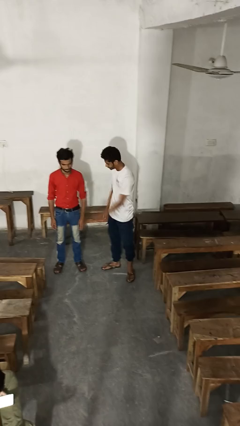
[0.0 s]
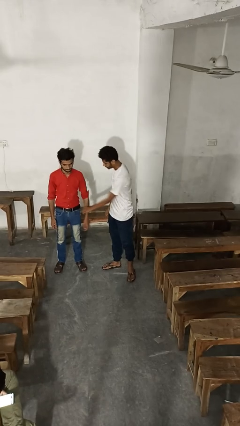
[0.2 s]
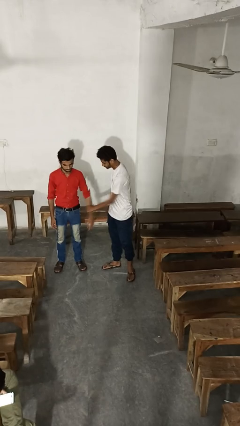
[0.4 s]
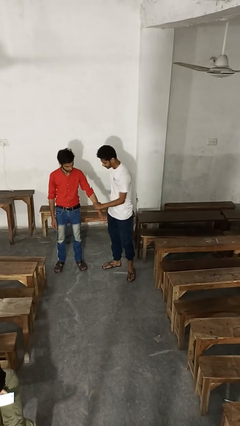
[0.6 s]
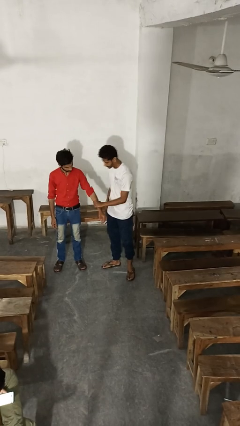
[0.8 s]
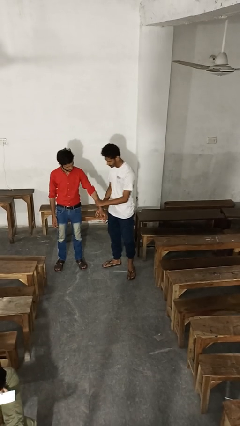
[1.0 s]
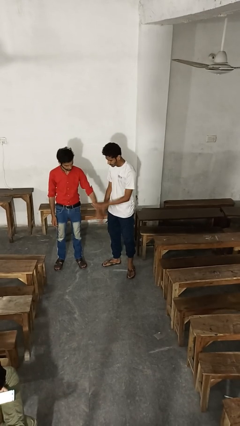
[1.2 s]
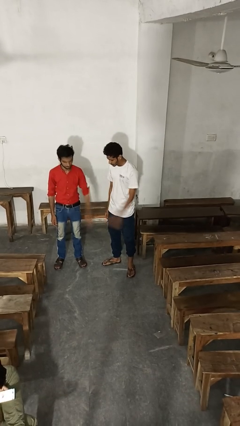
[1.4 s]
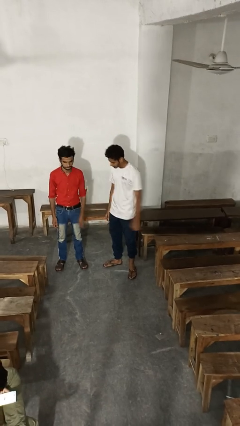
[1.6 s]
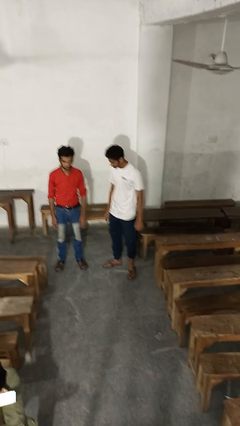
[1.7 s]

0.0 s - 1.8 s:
person grabs person by forearm

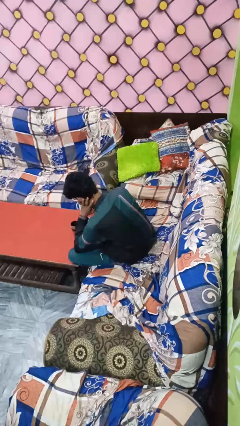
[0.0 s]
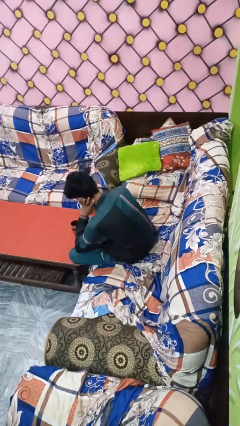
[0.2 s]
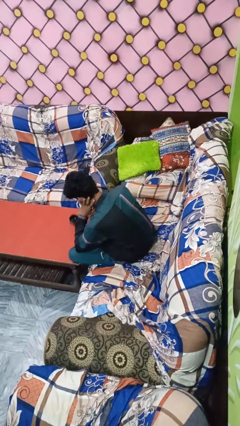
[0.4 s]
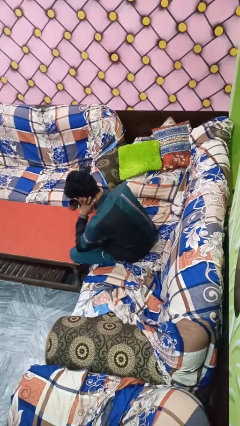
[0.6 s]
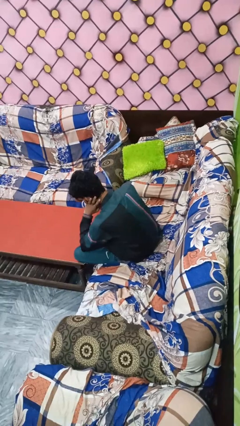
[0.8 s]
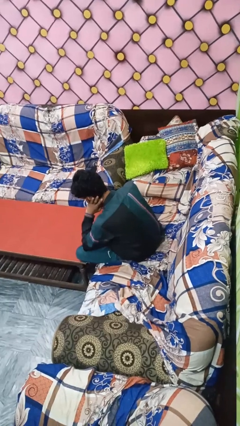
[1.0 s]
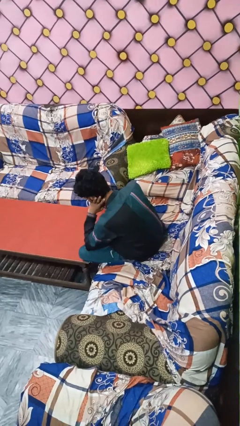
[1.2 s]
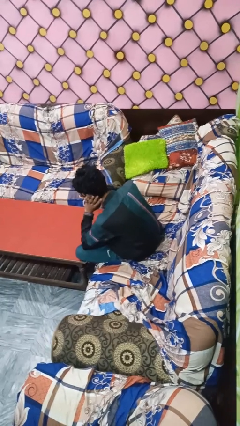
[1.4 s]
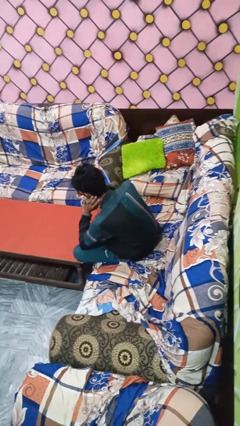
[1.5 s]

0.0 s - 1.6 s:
person pours coffee into mug

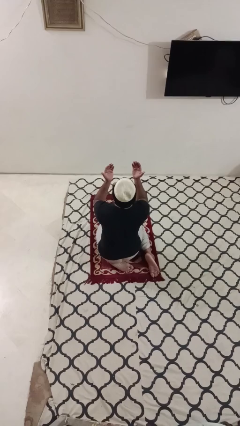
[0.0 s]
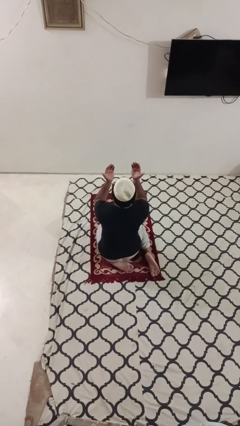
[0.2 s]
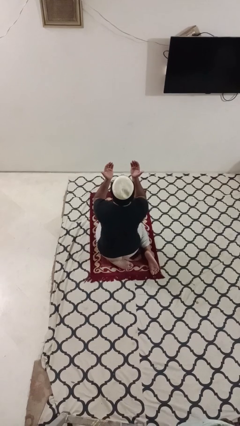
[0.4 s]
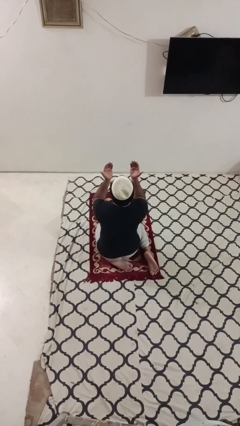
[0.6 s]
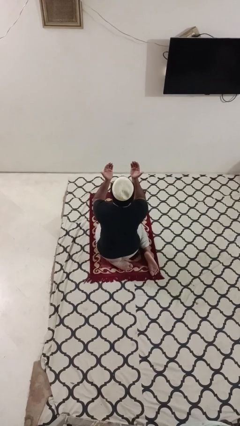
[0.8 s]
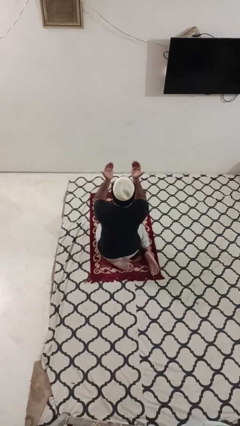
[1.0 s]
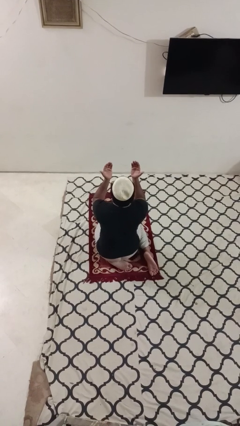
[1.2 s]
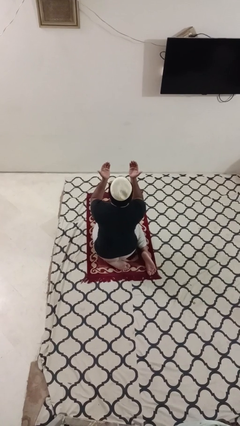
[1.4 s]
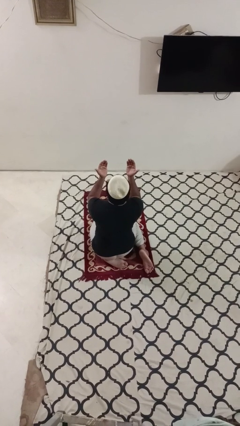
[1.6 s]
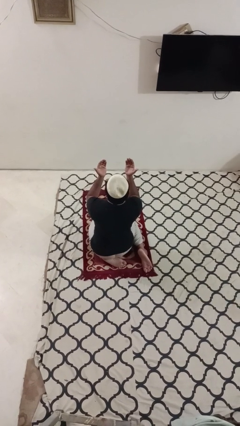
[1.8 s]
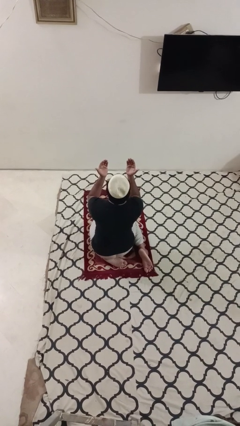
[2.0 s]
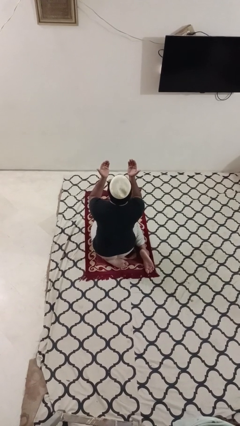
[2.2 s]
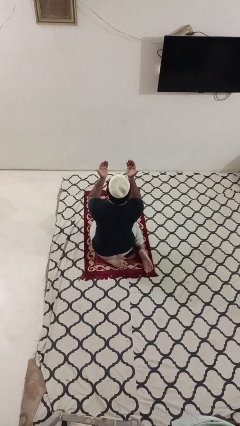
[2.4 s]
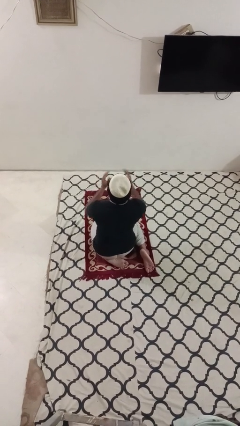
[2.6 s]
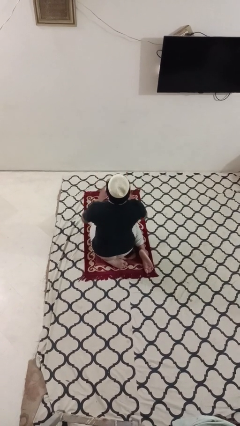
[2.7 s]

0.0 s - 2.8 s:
person prays

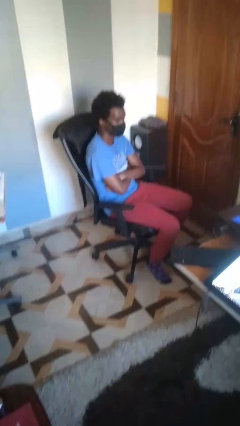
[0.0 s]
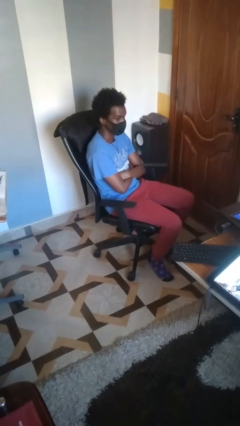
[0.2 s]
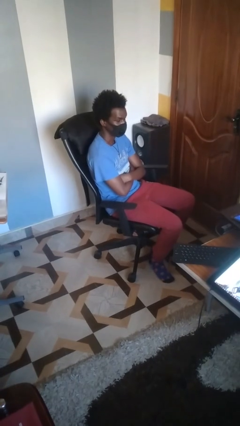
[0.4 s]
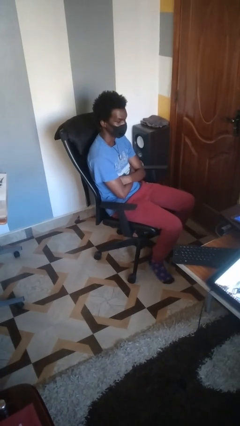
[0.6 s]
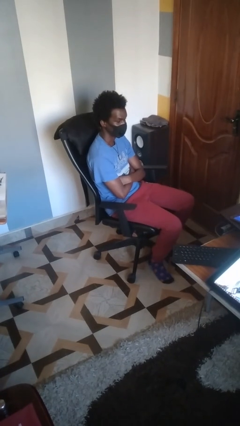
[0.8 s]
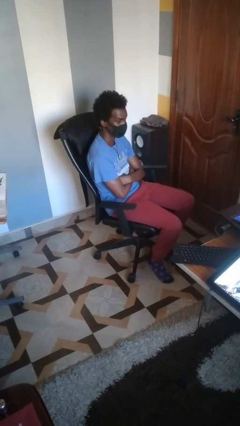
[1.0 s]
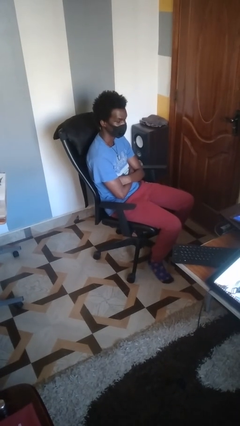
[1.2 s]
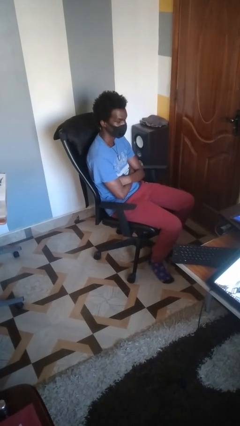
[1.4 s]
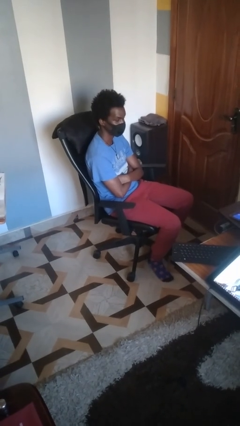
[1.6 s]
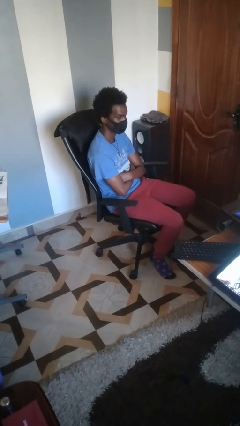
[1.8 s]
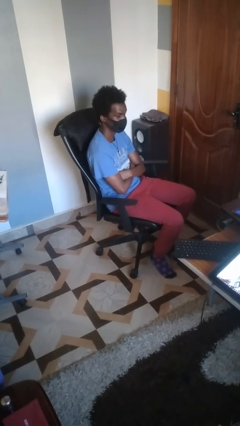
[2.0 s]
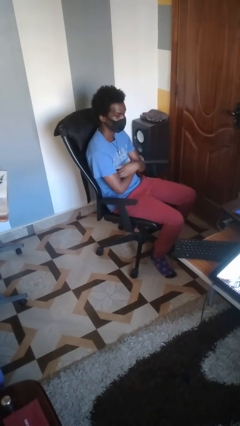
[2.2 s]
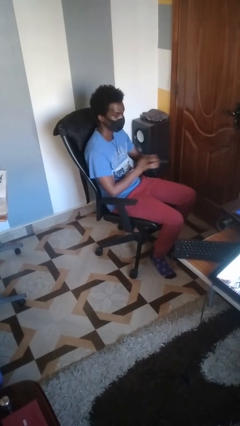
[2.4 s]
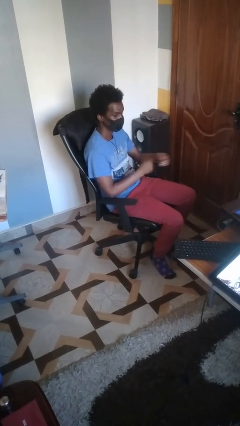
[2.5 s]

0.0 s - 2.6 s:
person crosses arms

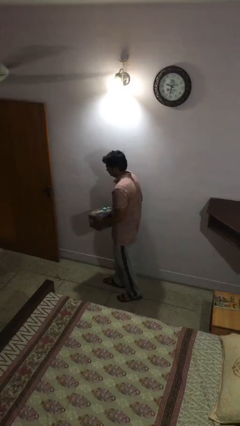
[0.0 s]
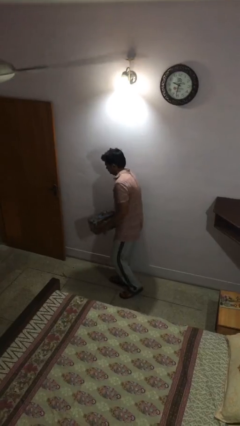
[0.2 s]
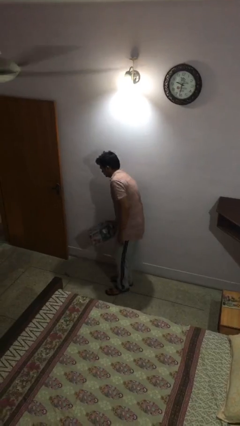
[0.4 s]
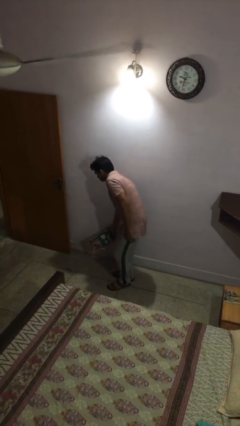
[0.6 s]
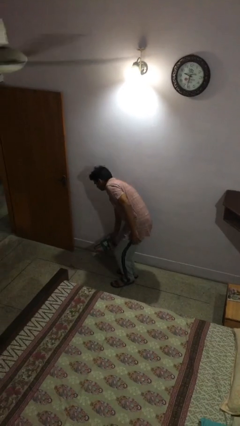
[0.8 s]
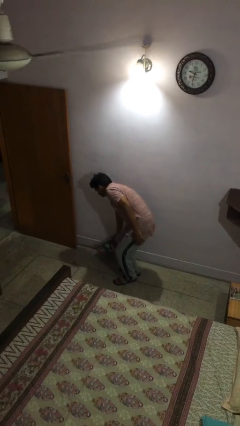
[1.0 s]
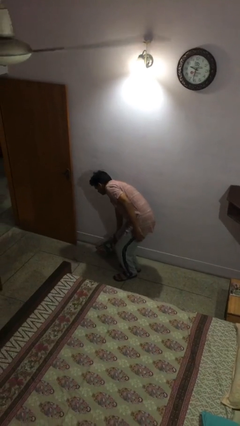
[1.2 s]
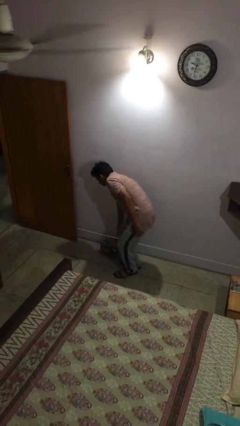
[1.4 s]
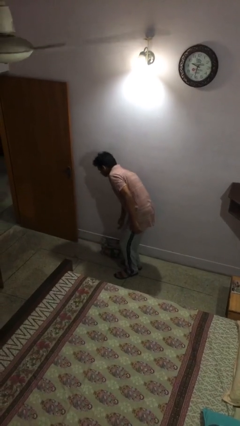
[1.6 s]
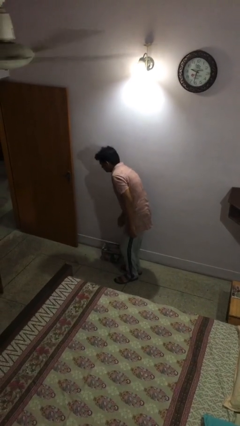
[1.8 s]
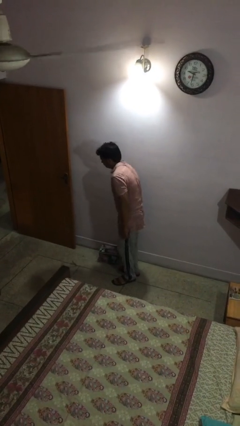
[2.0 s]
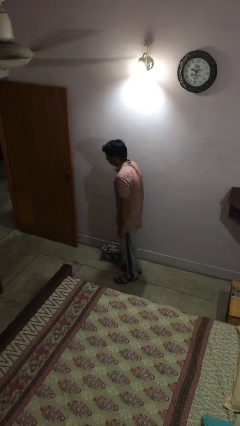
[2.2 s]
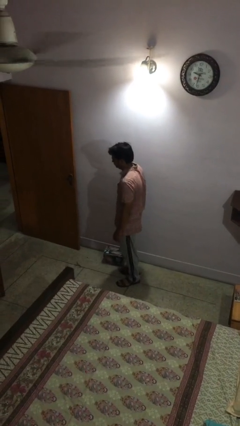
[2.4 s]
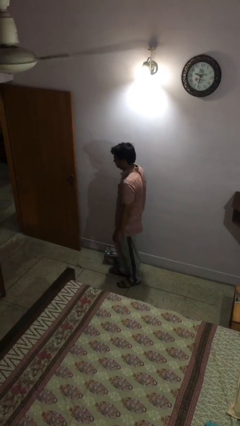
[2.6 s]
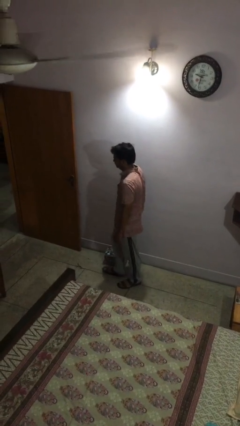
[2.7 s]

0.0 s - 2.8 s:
person puts down object on floor

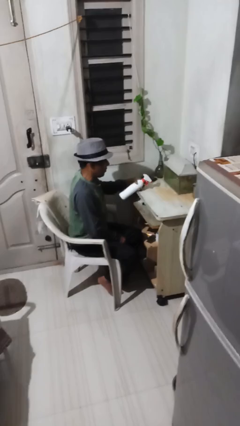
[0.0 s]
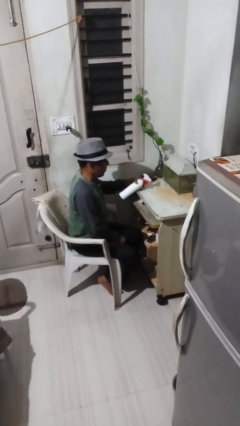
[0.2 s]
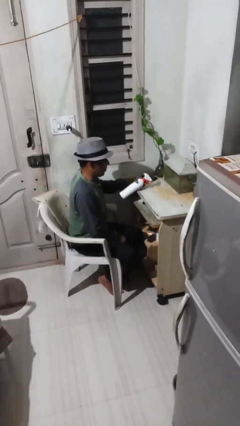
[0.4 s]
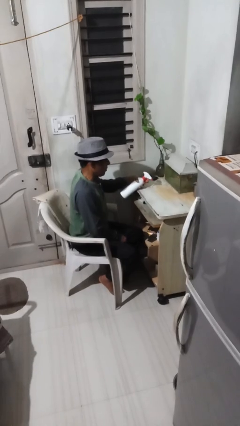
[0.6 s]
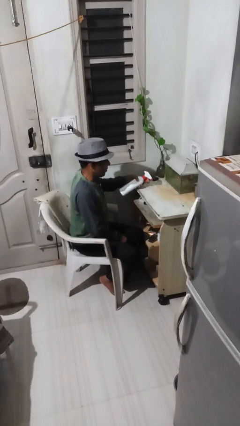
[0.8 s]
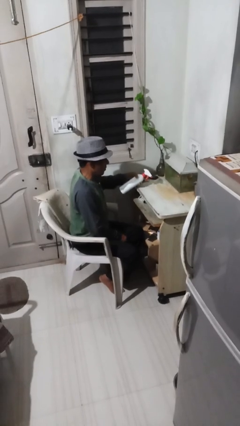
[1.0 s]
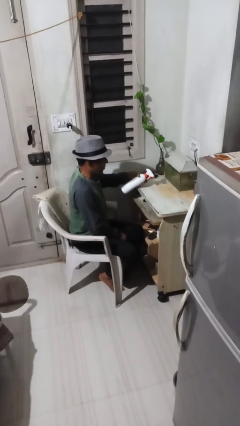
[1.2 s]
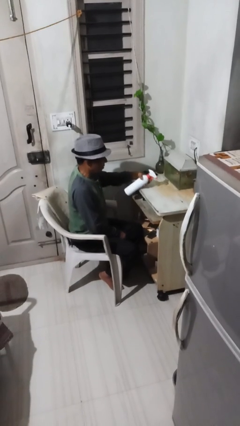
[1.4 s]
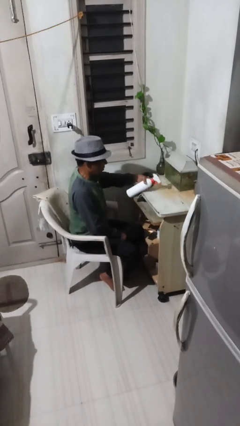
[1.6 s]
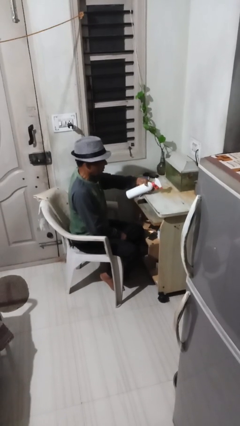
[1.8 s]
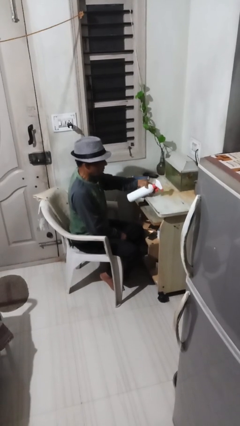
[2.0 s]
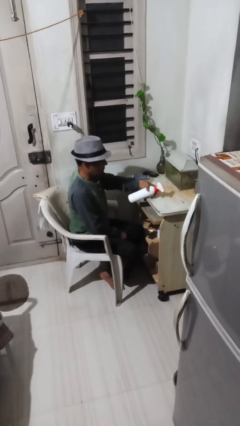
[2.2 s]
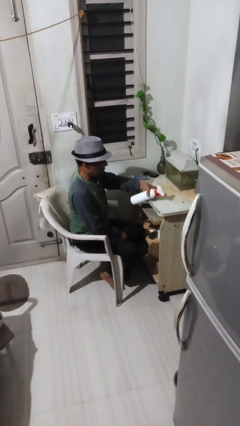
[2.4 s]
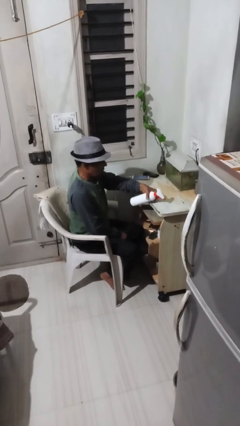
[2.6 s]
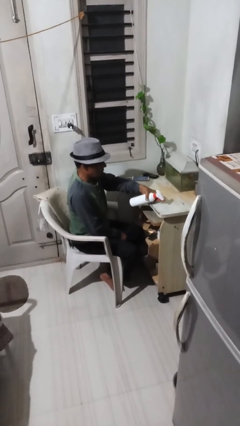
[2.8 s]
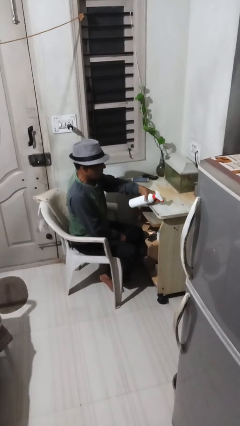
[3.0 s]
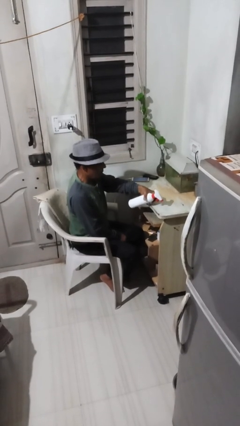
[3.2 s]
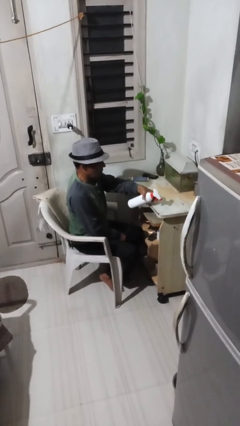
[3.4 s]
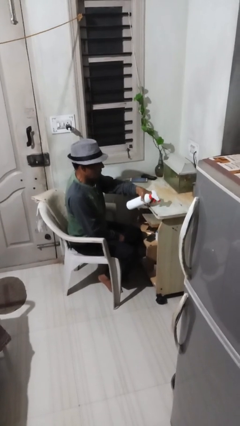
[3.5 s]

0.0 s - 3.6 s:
person sprays from bottle

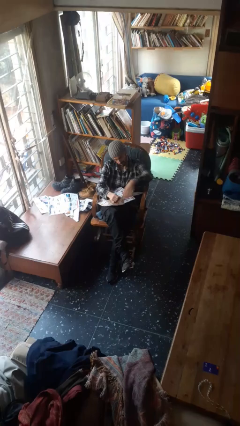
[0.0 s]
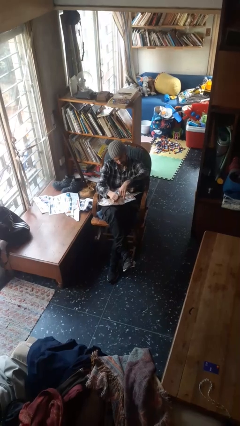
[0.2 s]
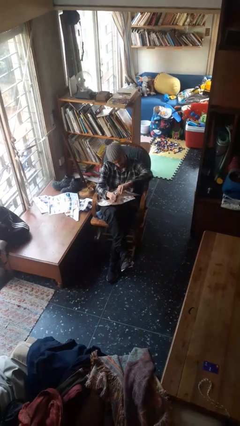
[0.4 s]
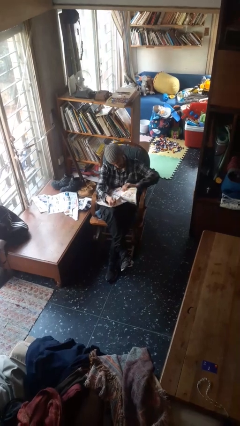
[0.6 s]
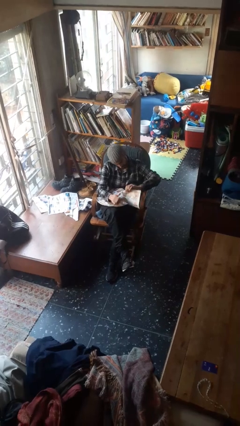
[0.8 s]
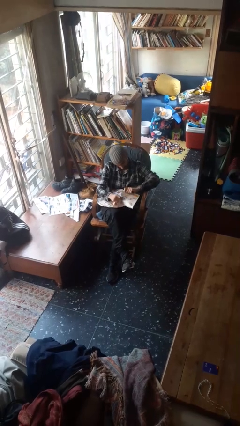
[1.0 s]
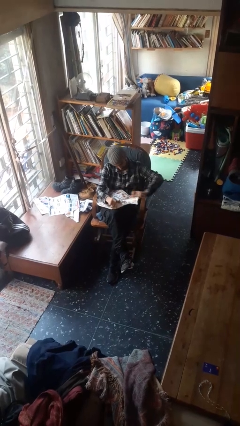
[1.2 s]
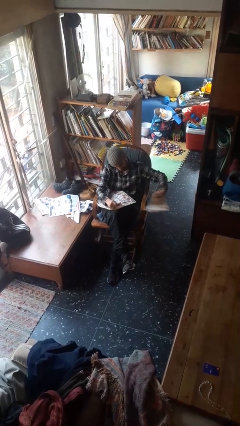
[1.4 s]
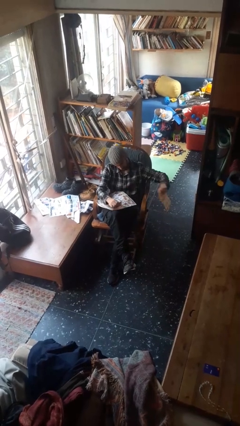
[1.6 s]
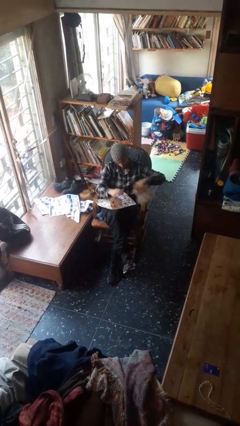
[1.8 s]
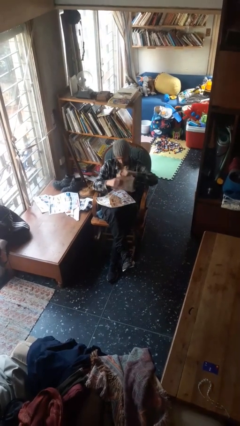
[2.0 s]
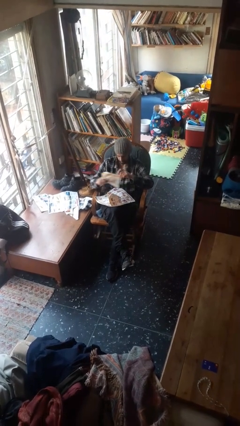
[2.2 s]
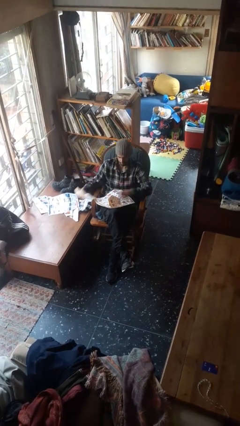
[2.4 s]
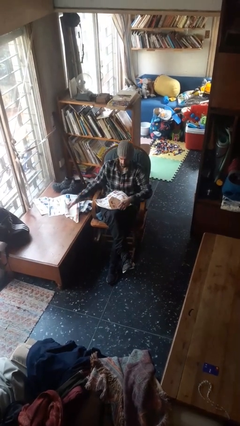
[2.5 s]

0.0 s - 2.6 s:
person tears paper
